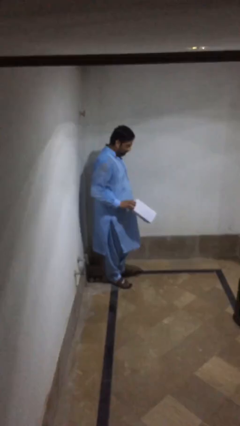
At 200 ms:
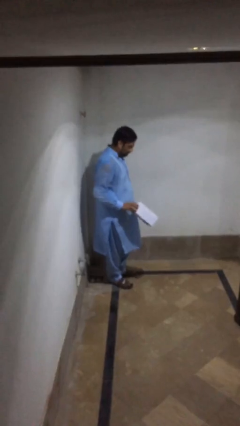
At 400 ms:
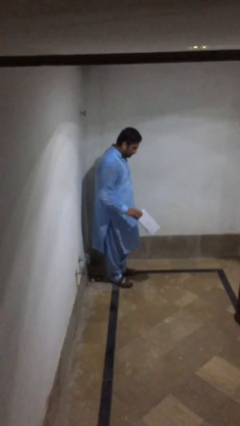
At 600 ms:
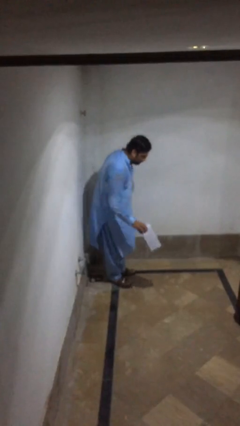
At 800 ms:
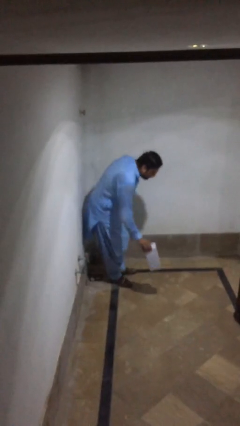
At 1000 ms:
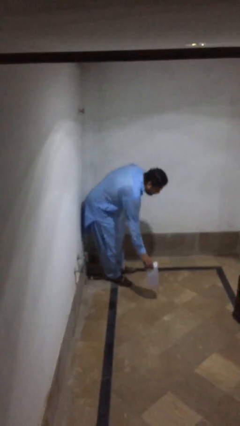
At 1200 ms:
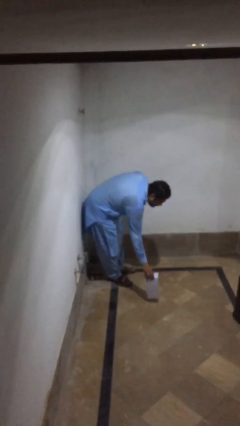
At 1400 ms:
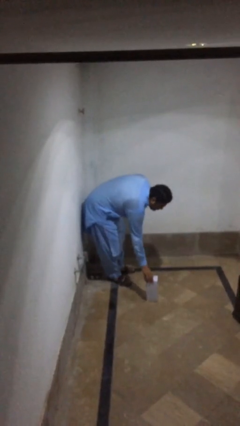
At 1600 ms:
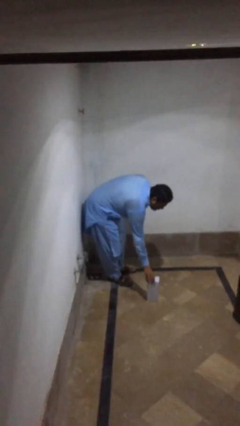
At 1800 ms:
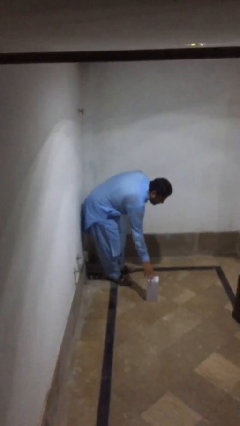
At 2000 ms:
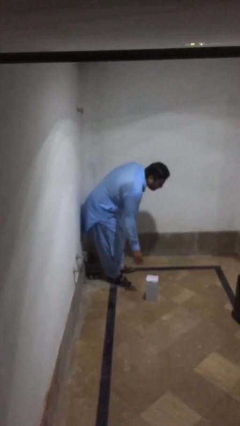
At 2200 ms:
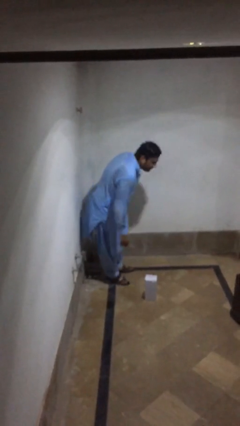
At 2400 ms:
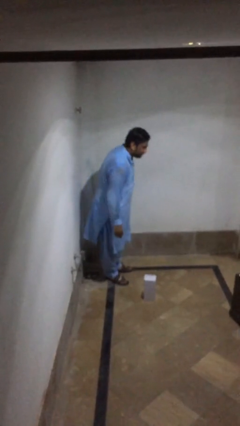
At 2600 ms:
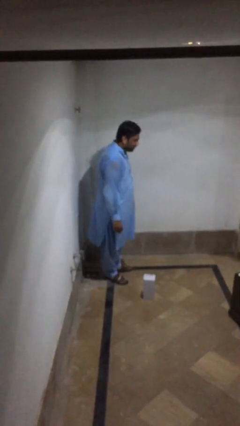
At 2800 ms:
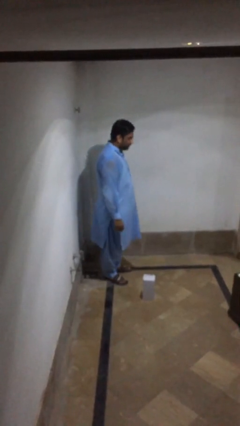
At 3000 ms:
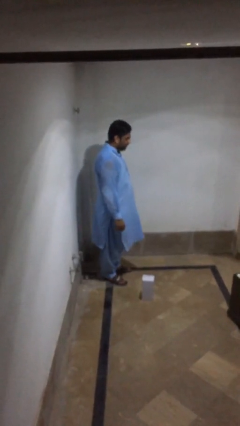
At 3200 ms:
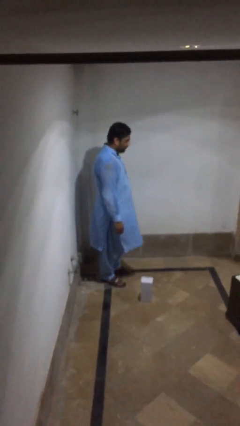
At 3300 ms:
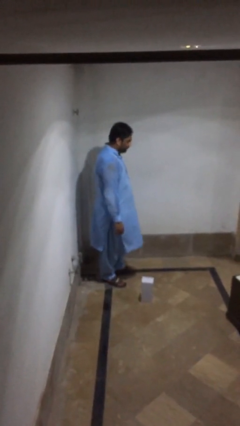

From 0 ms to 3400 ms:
person puts down object on floor

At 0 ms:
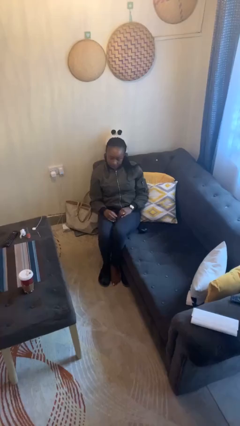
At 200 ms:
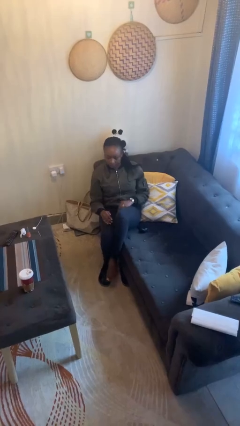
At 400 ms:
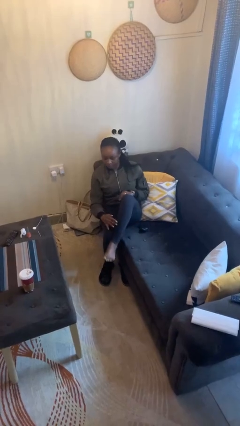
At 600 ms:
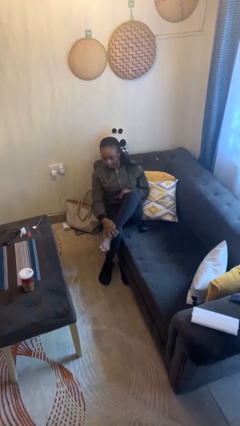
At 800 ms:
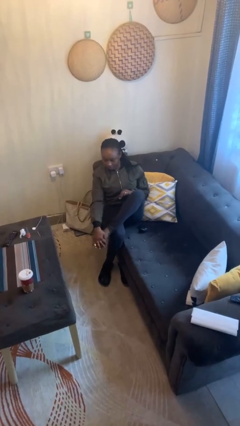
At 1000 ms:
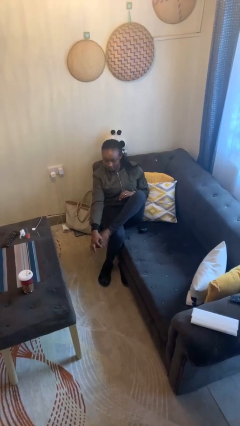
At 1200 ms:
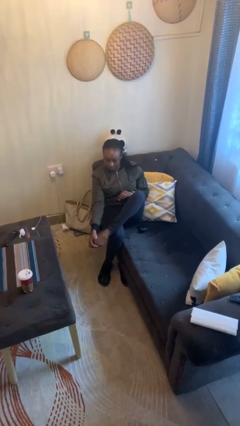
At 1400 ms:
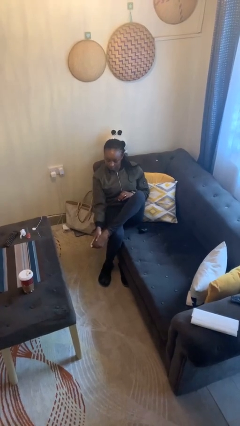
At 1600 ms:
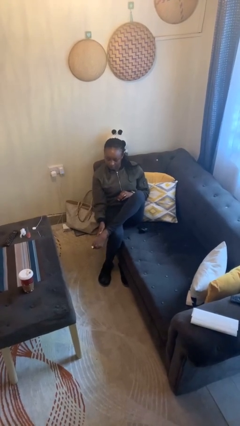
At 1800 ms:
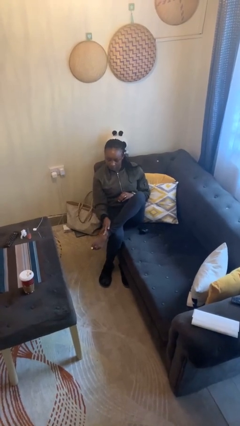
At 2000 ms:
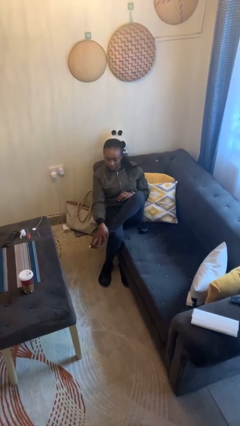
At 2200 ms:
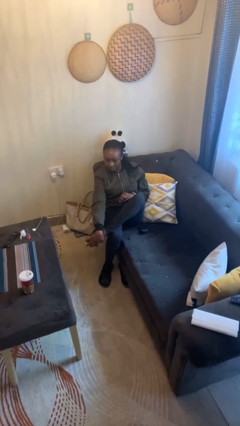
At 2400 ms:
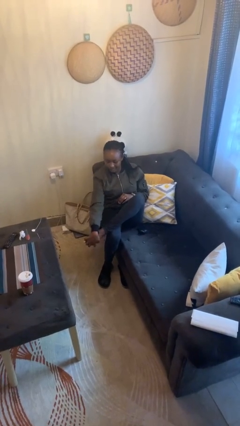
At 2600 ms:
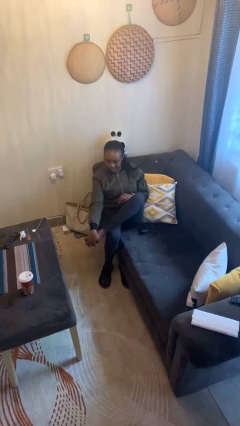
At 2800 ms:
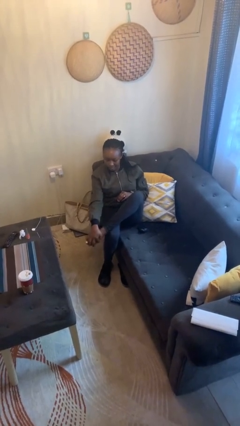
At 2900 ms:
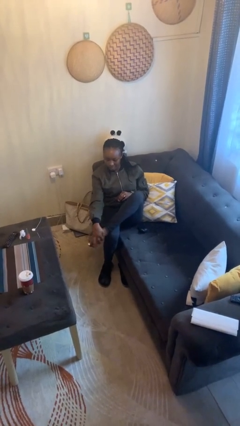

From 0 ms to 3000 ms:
person rubs foot

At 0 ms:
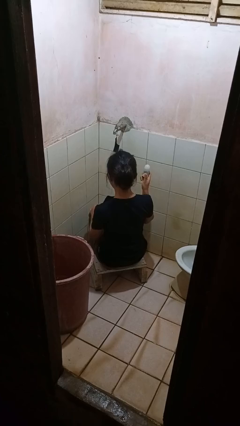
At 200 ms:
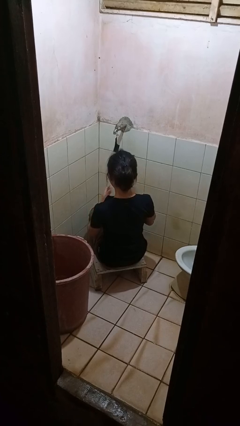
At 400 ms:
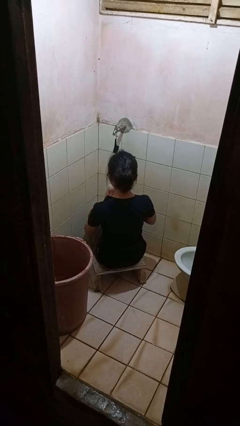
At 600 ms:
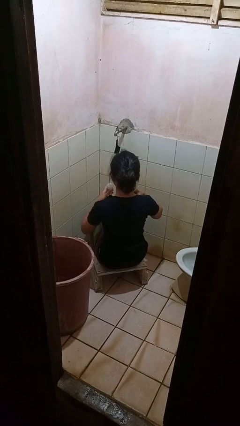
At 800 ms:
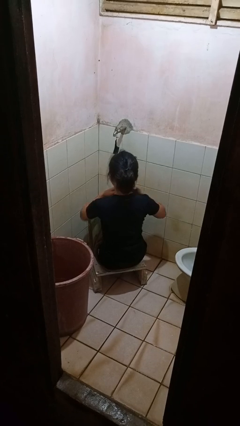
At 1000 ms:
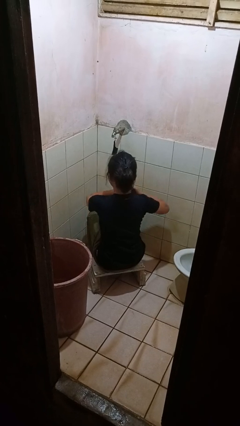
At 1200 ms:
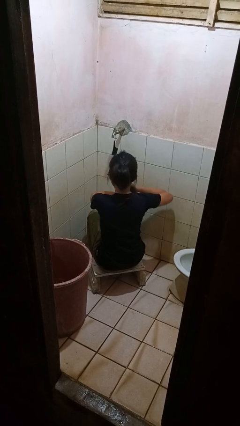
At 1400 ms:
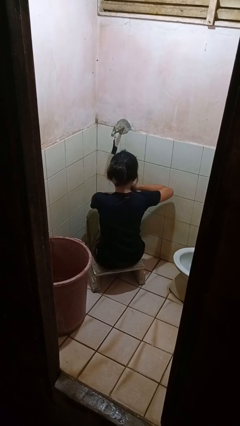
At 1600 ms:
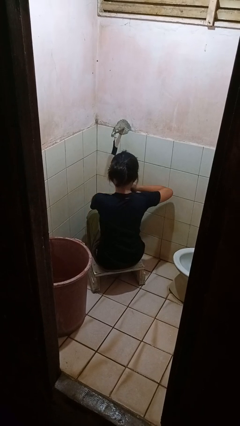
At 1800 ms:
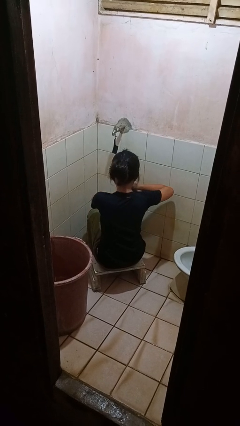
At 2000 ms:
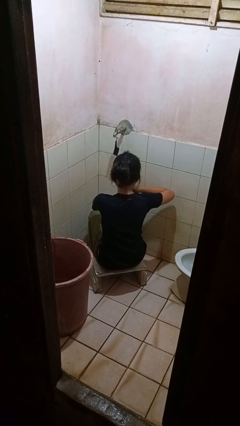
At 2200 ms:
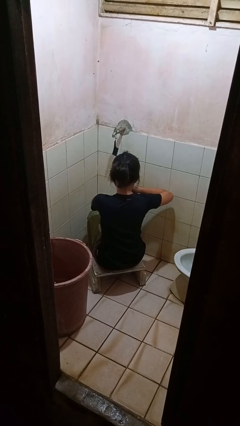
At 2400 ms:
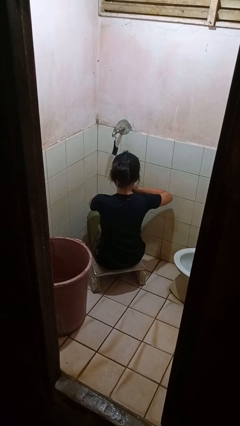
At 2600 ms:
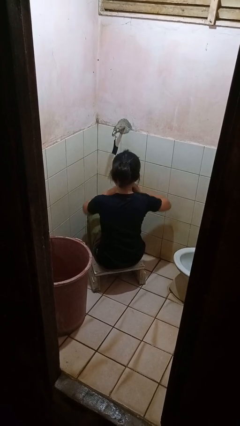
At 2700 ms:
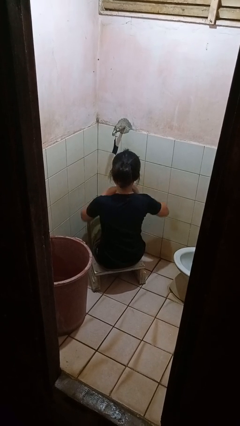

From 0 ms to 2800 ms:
person applies deodorant

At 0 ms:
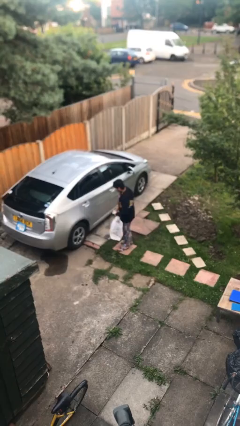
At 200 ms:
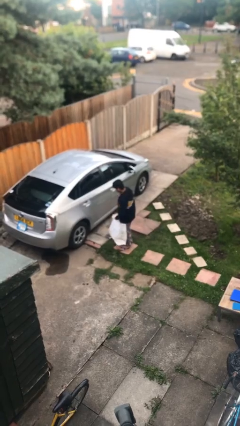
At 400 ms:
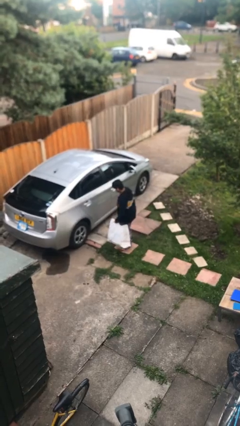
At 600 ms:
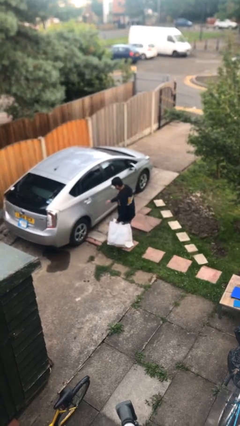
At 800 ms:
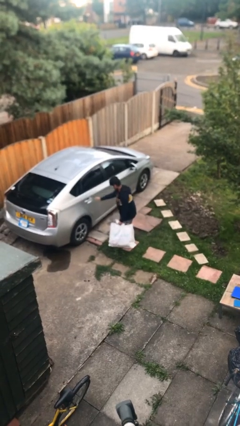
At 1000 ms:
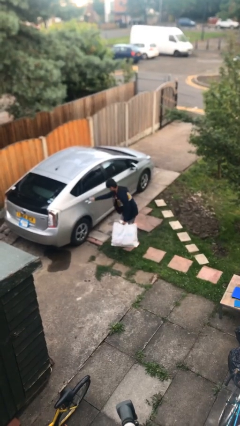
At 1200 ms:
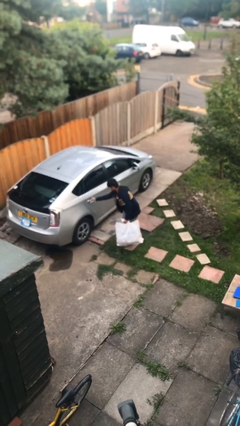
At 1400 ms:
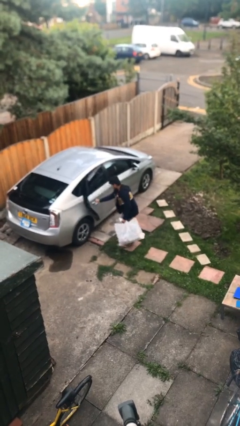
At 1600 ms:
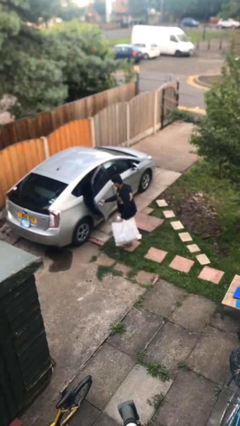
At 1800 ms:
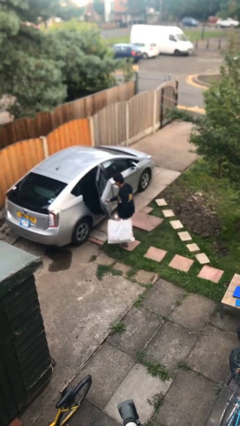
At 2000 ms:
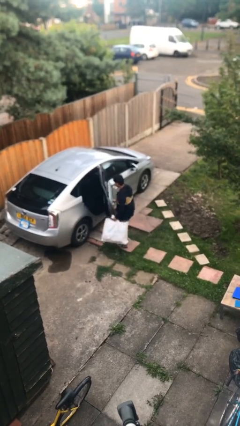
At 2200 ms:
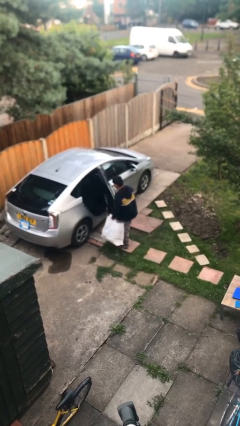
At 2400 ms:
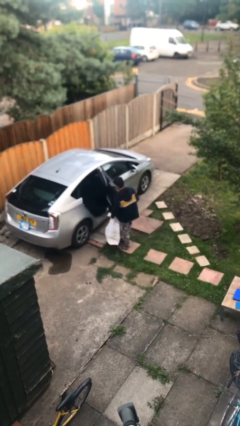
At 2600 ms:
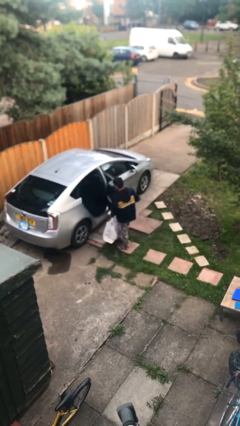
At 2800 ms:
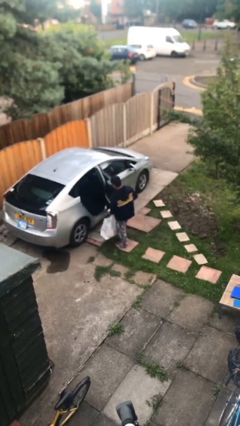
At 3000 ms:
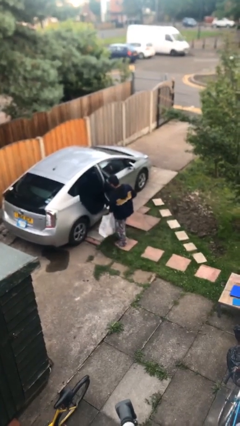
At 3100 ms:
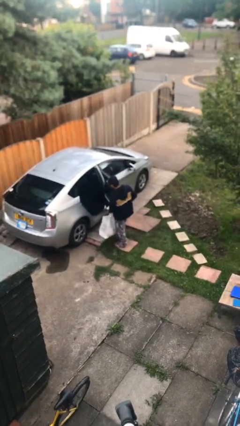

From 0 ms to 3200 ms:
person opens car door

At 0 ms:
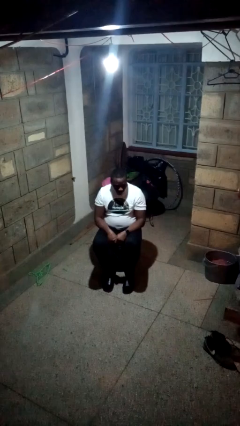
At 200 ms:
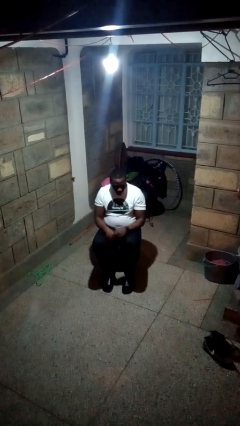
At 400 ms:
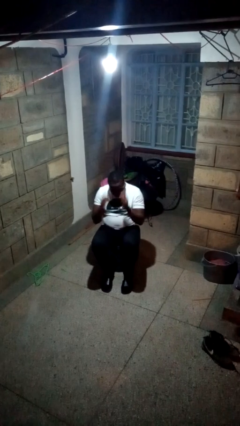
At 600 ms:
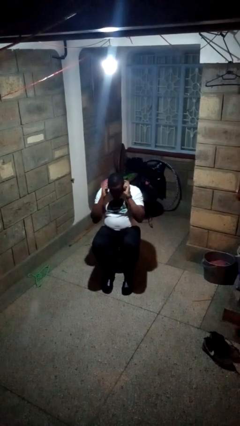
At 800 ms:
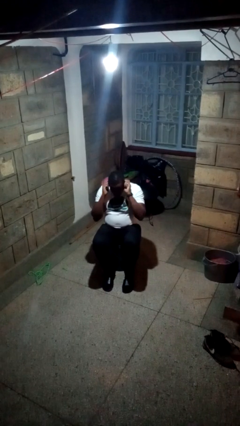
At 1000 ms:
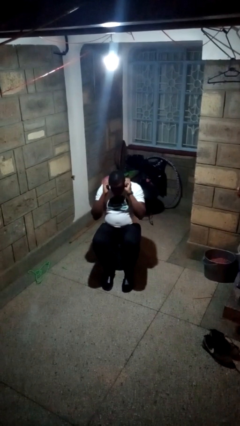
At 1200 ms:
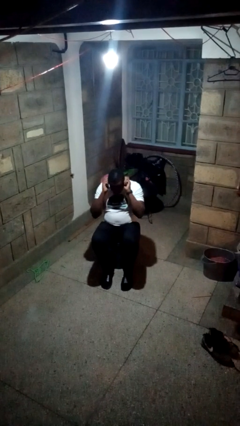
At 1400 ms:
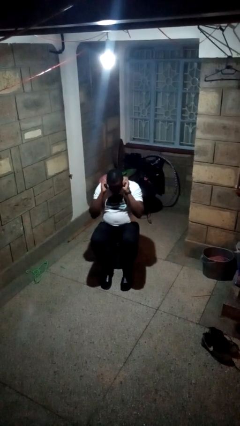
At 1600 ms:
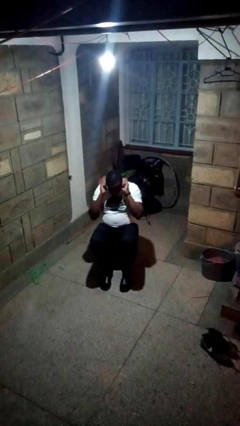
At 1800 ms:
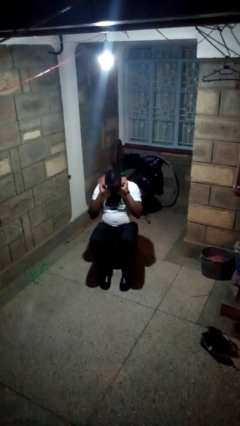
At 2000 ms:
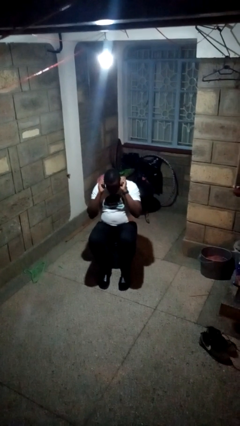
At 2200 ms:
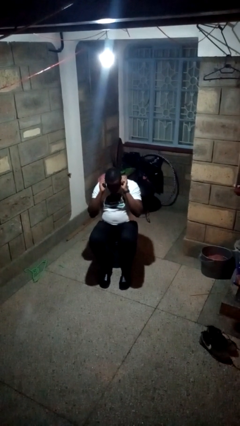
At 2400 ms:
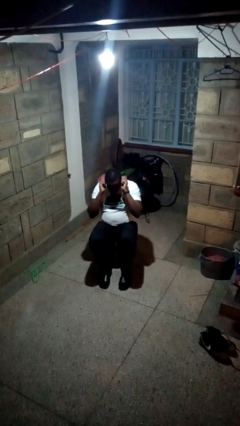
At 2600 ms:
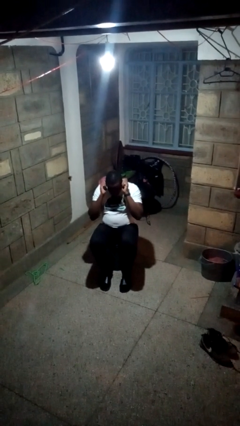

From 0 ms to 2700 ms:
person touches earlobe

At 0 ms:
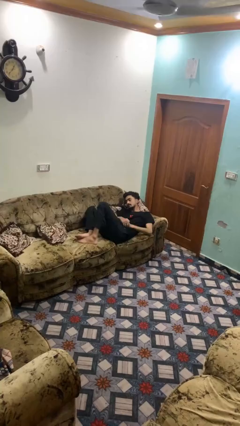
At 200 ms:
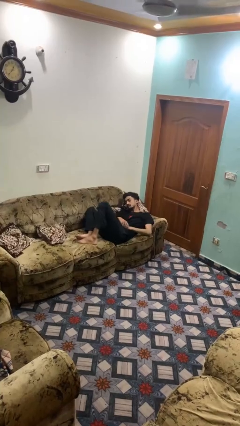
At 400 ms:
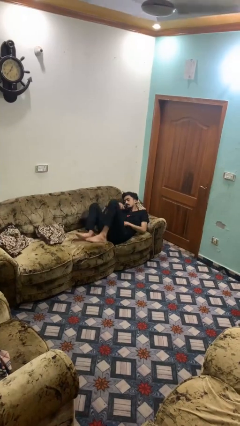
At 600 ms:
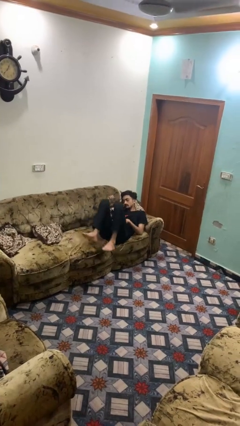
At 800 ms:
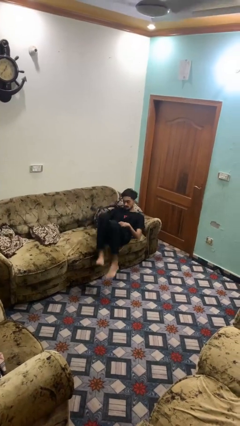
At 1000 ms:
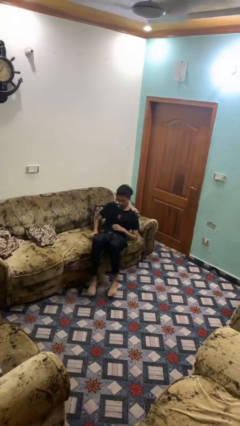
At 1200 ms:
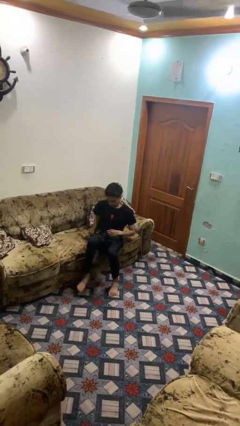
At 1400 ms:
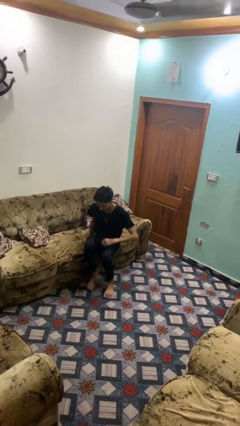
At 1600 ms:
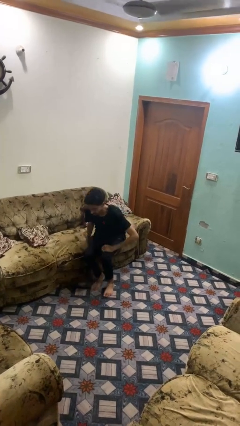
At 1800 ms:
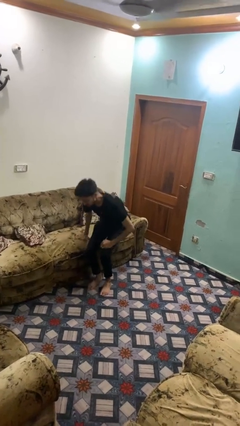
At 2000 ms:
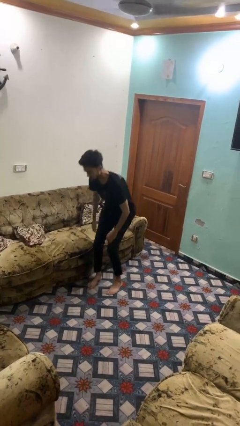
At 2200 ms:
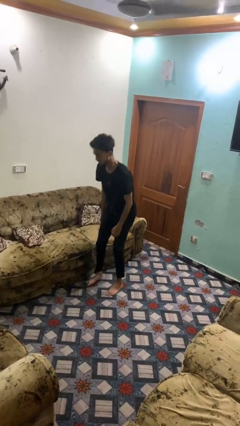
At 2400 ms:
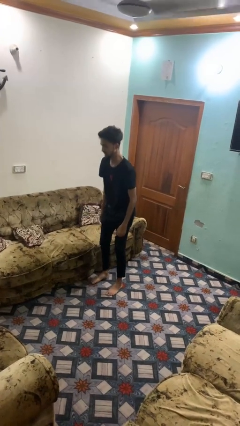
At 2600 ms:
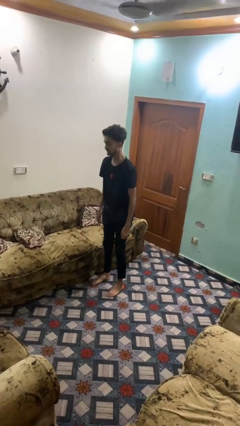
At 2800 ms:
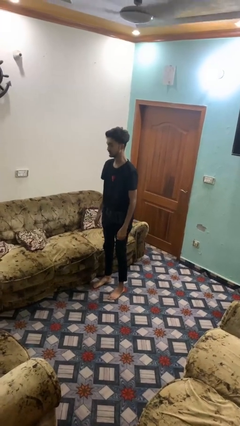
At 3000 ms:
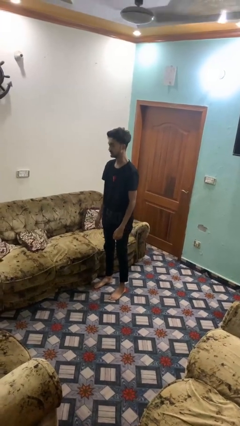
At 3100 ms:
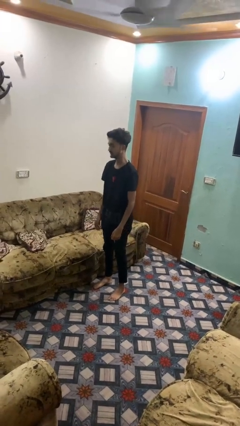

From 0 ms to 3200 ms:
person stands up
